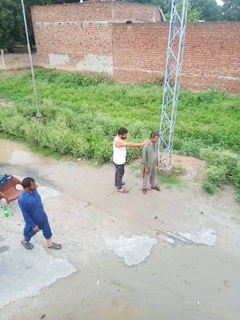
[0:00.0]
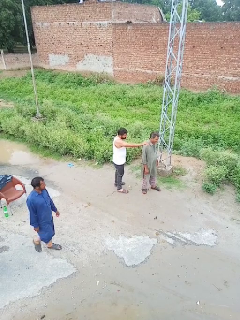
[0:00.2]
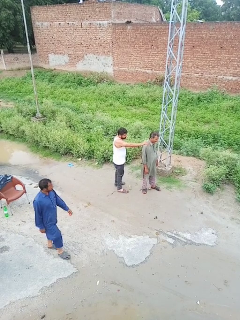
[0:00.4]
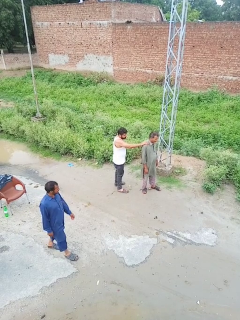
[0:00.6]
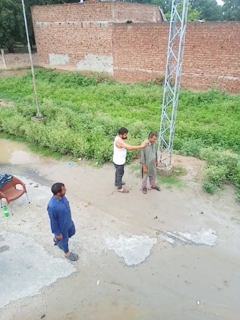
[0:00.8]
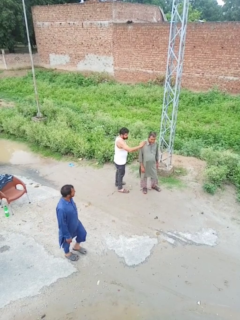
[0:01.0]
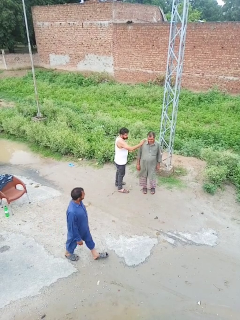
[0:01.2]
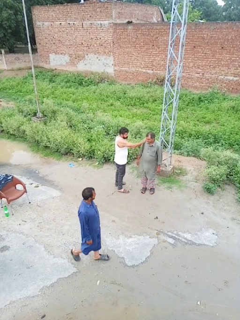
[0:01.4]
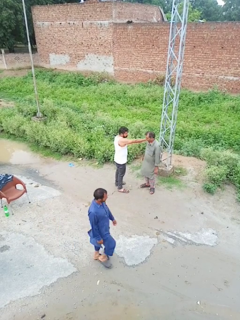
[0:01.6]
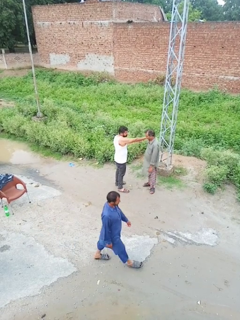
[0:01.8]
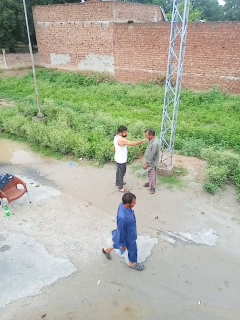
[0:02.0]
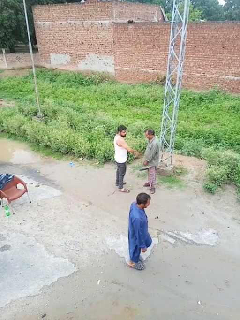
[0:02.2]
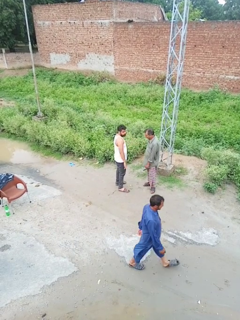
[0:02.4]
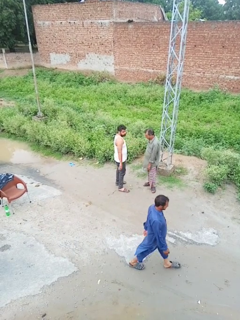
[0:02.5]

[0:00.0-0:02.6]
person spins person around

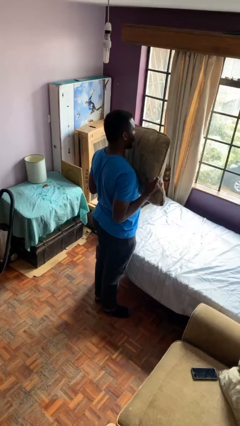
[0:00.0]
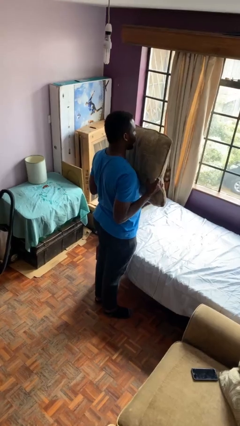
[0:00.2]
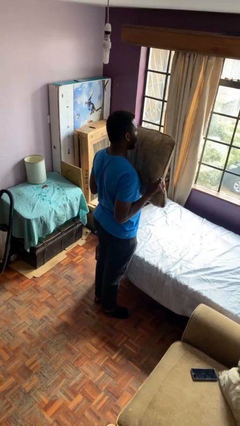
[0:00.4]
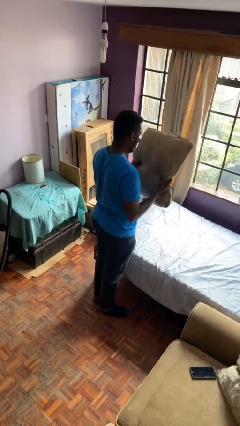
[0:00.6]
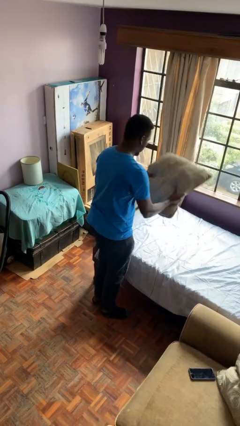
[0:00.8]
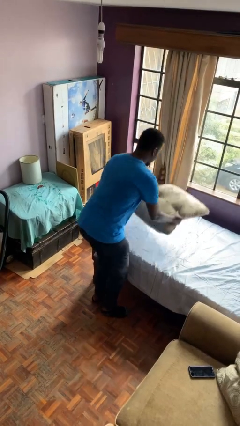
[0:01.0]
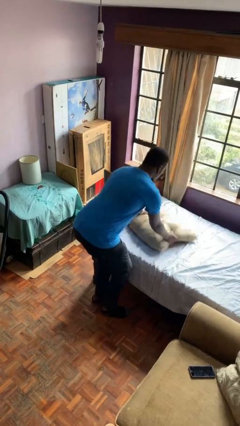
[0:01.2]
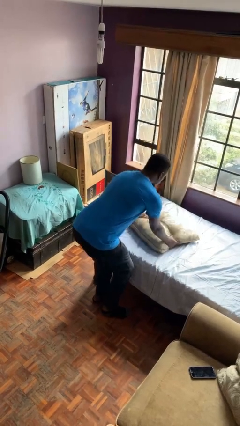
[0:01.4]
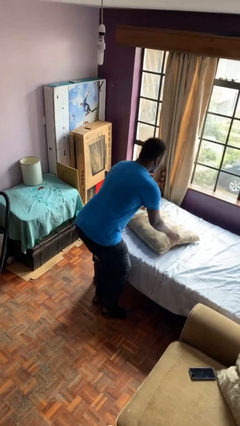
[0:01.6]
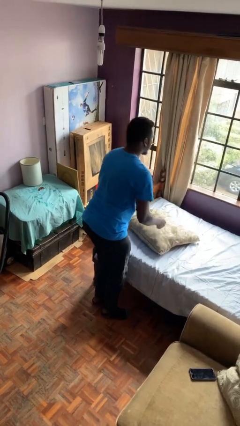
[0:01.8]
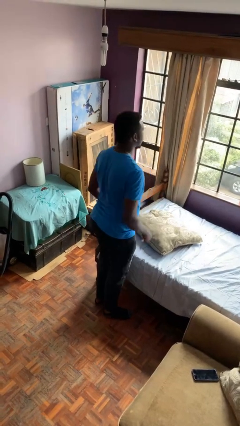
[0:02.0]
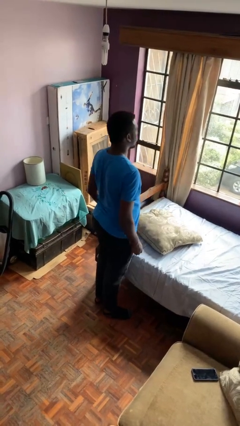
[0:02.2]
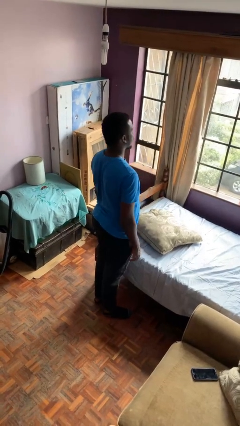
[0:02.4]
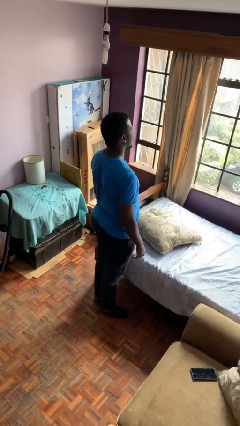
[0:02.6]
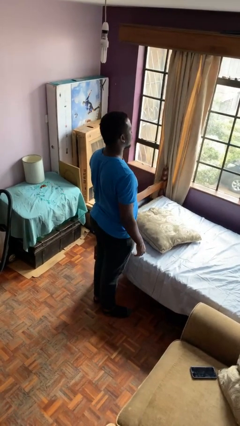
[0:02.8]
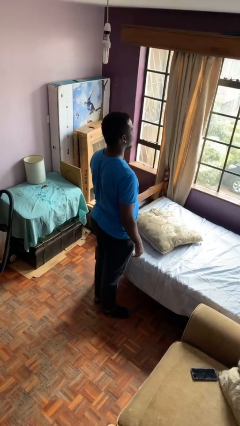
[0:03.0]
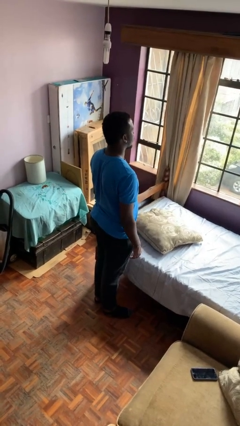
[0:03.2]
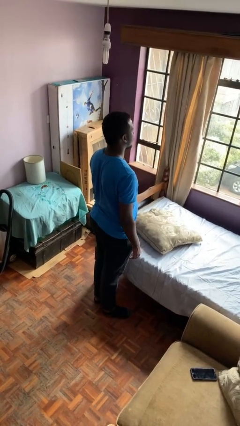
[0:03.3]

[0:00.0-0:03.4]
person puts down object on bed

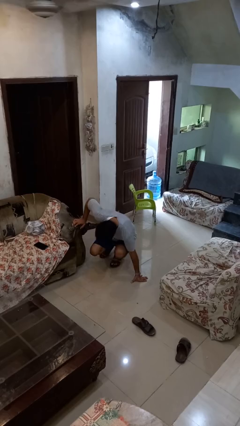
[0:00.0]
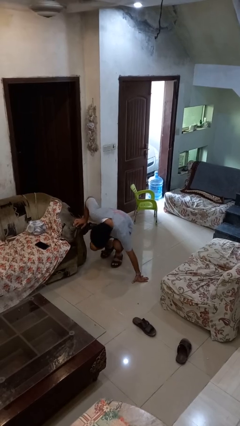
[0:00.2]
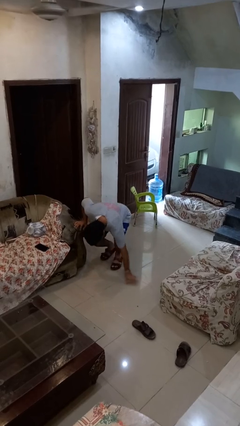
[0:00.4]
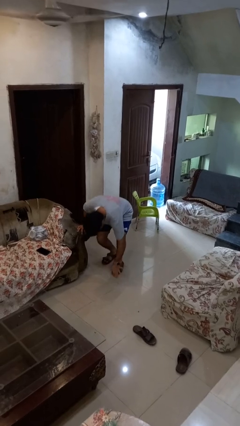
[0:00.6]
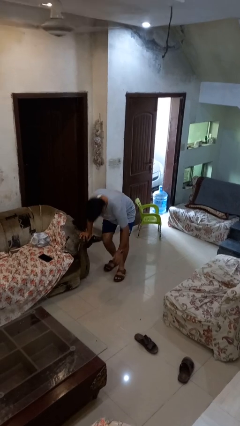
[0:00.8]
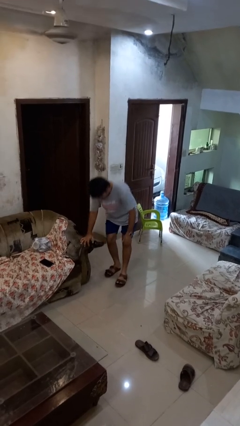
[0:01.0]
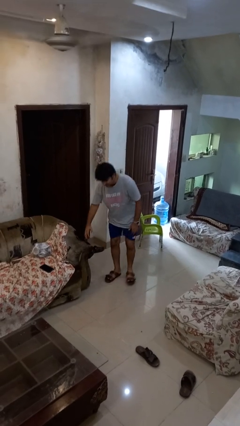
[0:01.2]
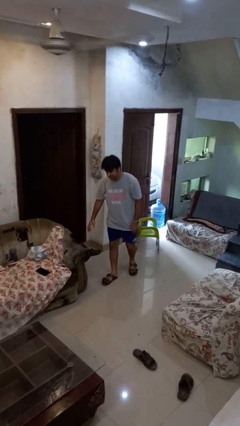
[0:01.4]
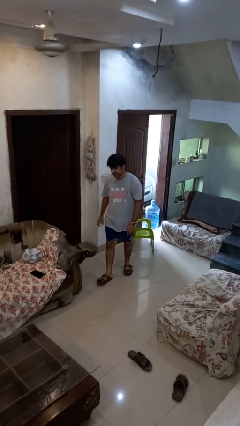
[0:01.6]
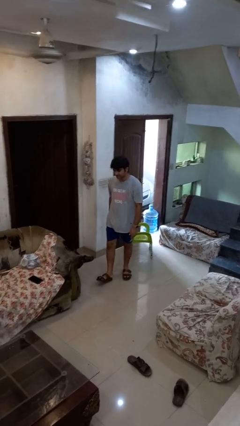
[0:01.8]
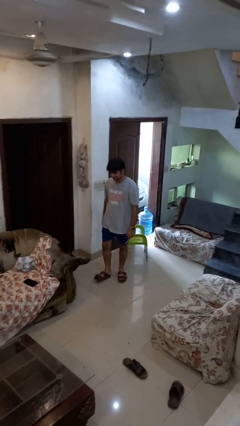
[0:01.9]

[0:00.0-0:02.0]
person stands up from floor

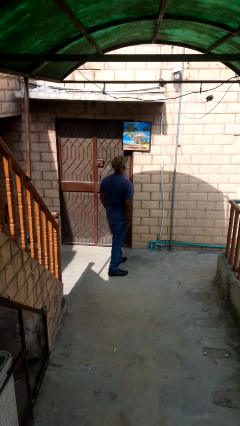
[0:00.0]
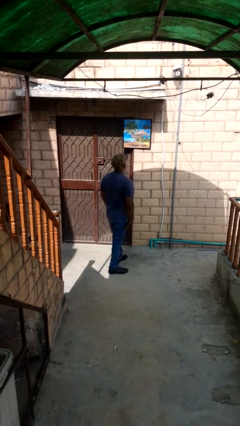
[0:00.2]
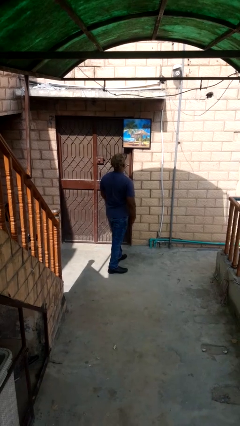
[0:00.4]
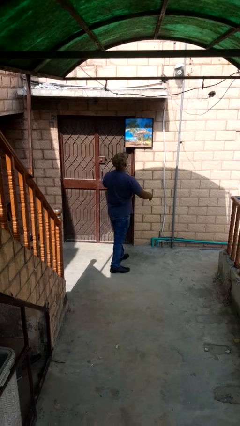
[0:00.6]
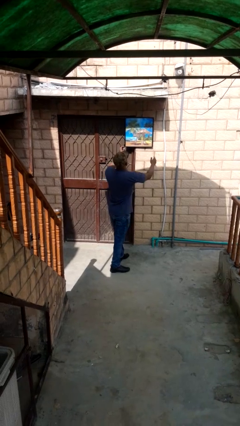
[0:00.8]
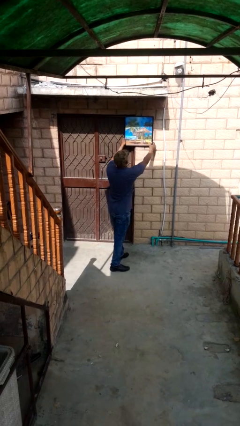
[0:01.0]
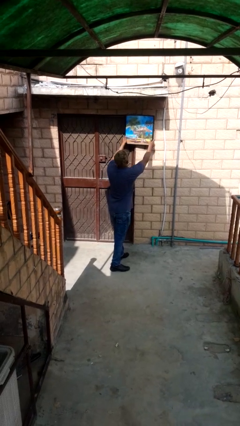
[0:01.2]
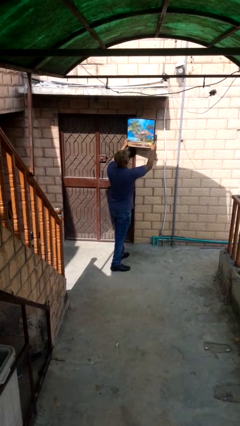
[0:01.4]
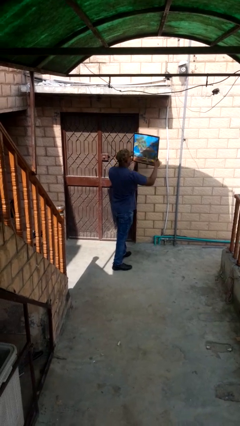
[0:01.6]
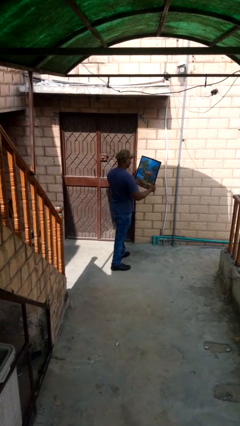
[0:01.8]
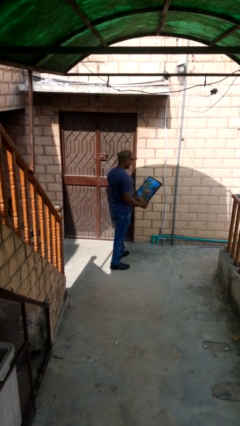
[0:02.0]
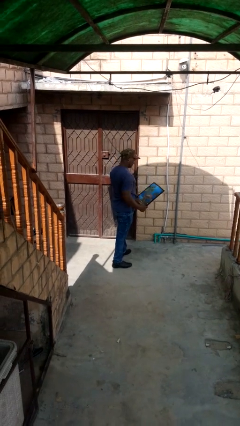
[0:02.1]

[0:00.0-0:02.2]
person takes down picture frame

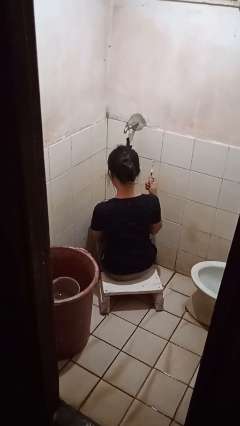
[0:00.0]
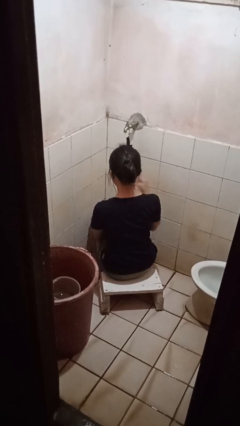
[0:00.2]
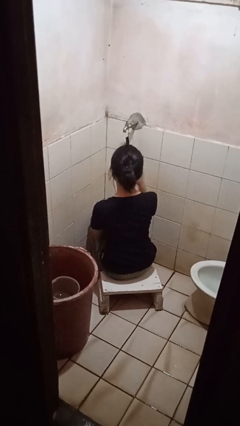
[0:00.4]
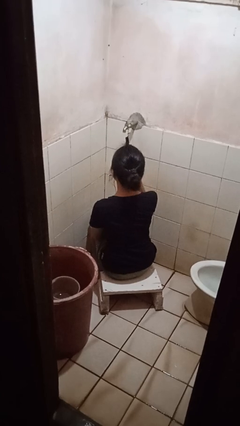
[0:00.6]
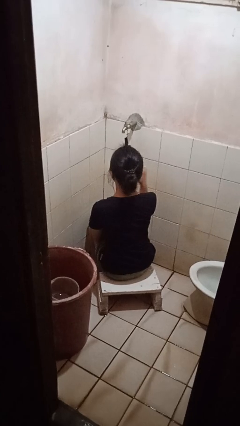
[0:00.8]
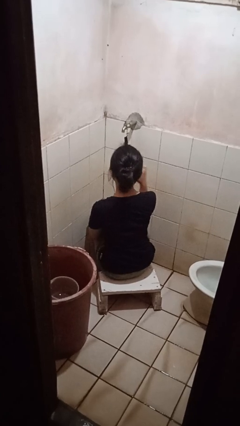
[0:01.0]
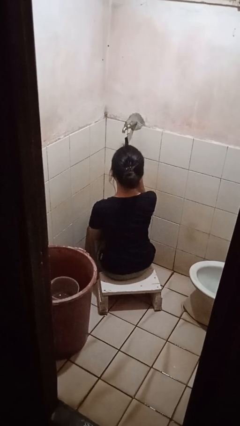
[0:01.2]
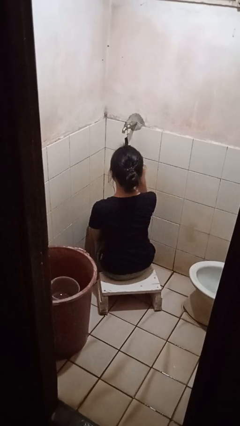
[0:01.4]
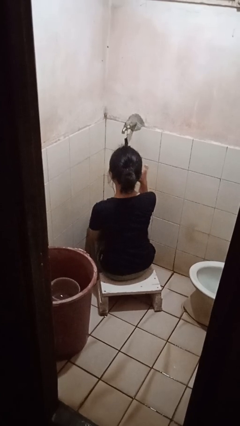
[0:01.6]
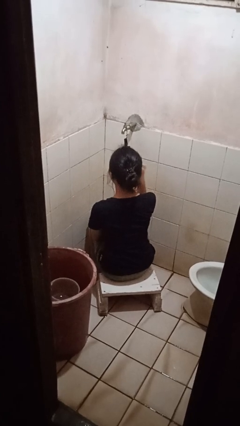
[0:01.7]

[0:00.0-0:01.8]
person brushes teeth

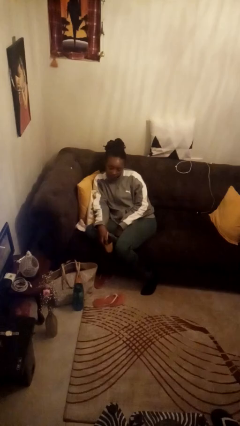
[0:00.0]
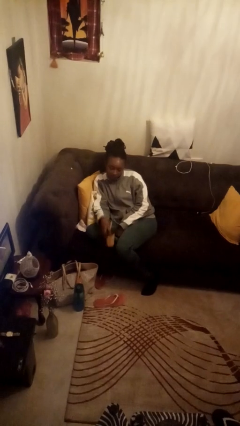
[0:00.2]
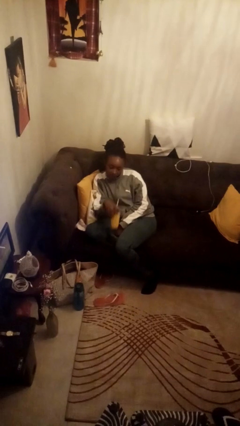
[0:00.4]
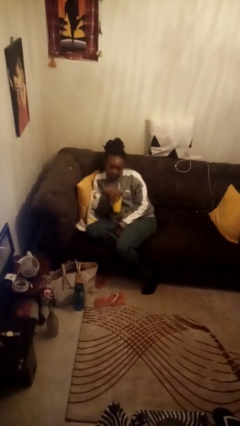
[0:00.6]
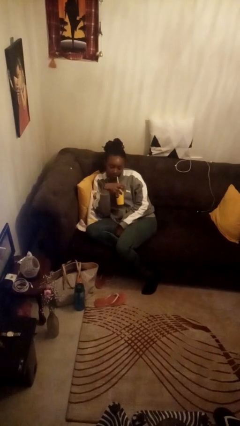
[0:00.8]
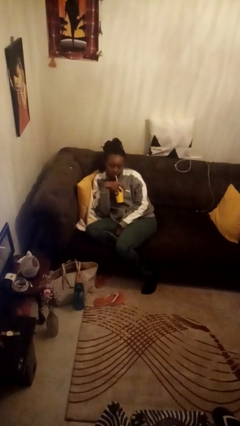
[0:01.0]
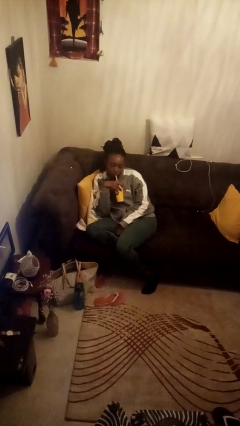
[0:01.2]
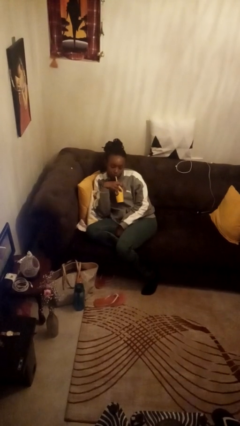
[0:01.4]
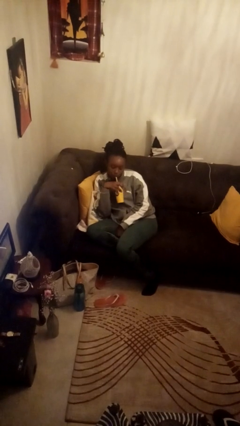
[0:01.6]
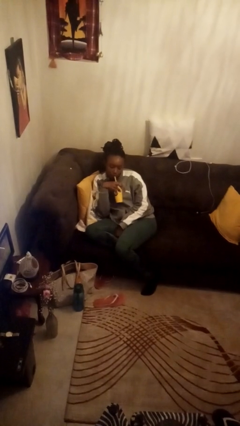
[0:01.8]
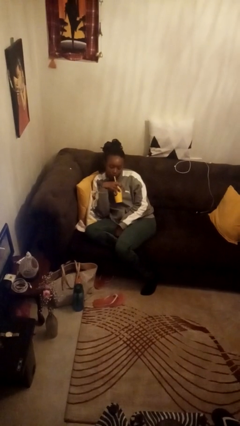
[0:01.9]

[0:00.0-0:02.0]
person drinks from straw

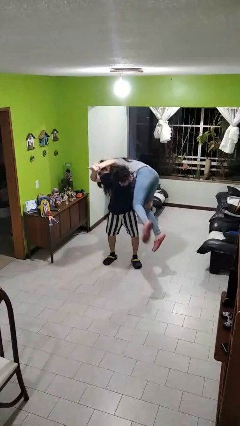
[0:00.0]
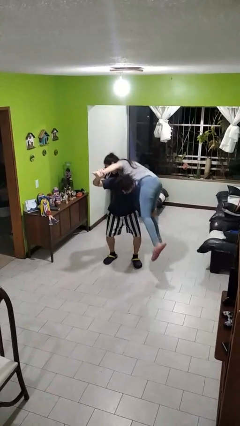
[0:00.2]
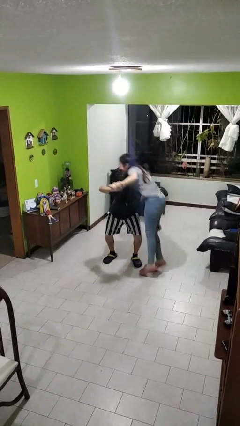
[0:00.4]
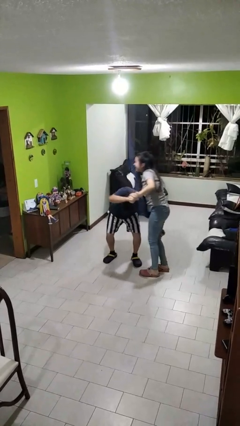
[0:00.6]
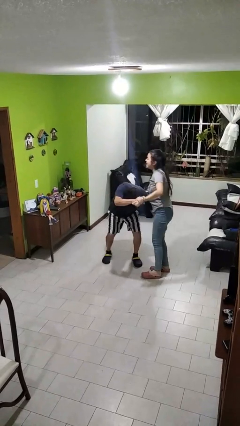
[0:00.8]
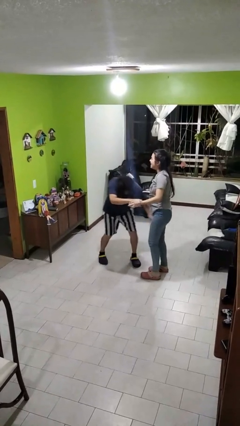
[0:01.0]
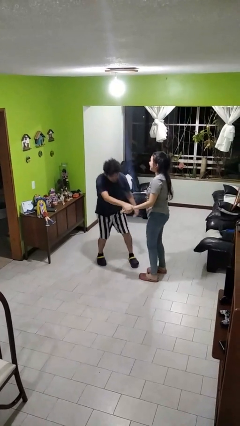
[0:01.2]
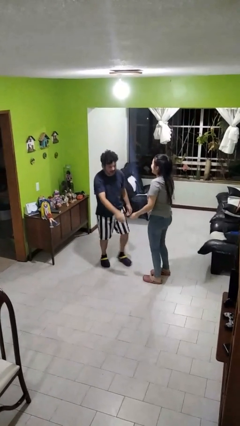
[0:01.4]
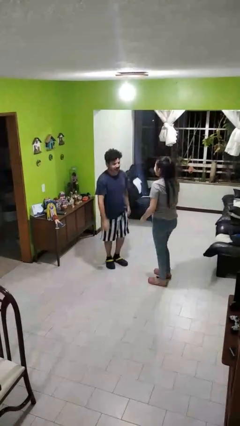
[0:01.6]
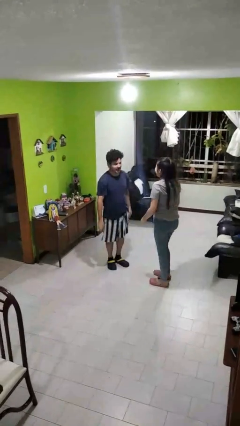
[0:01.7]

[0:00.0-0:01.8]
person puts down person

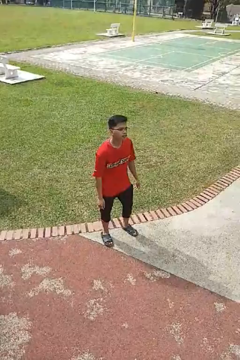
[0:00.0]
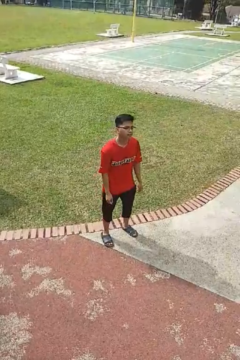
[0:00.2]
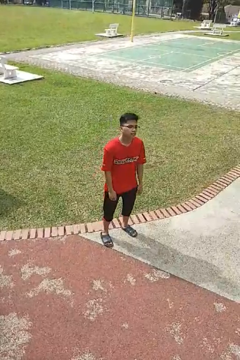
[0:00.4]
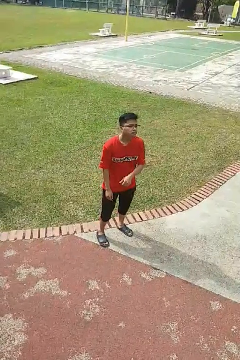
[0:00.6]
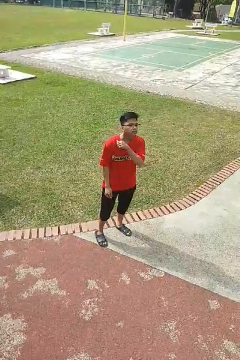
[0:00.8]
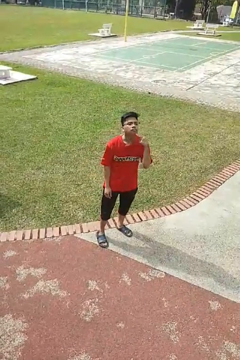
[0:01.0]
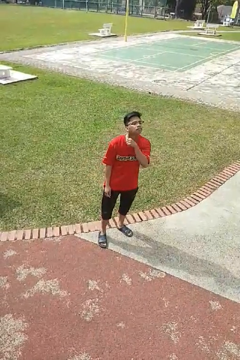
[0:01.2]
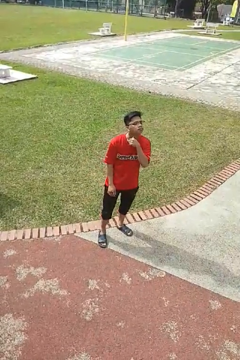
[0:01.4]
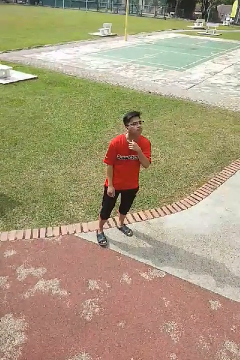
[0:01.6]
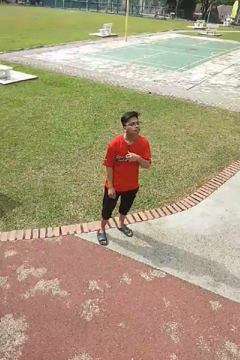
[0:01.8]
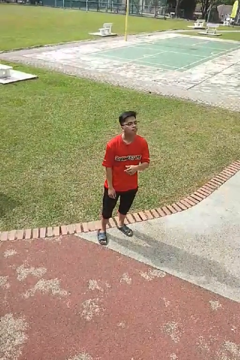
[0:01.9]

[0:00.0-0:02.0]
person gestures cut

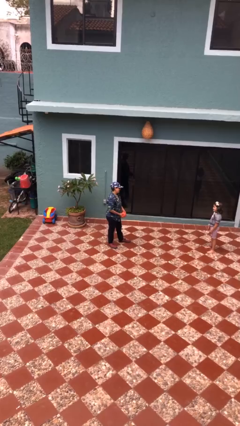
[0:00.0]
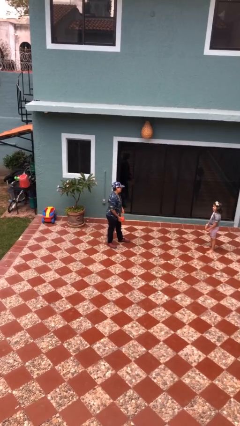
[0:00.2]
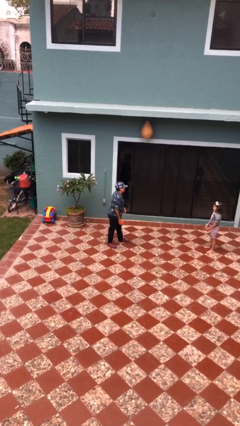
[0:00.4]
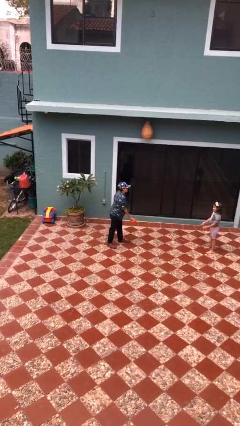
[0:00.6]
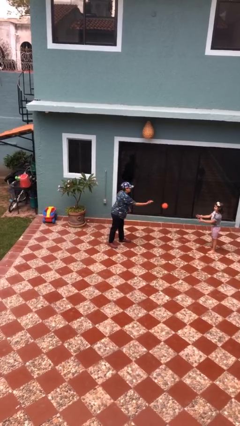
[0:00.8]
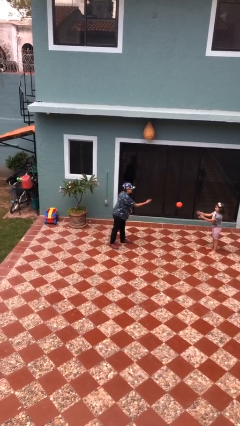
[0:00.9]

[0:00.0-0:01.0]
person throws object to person
